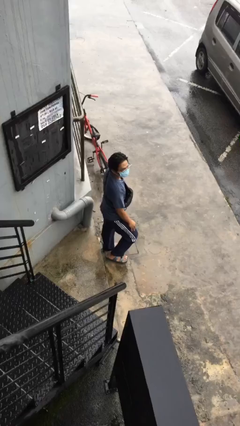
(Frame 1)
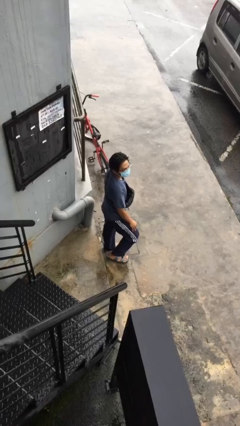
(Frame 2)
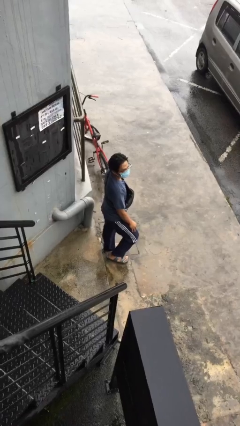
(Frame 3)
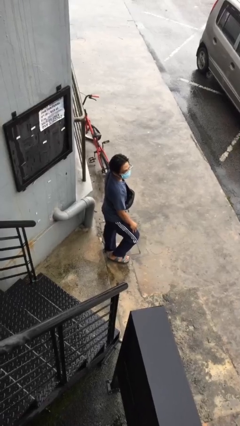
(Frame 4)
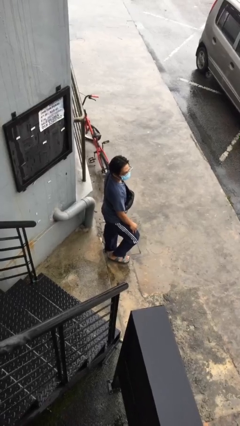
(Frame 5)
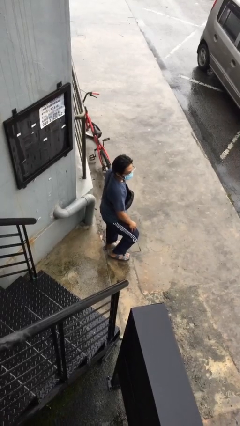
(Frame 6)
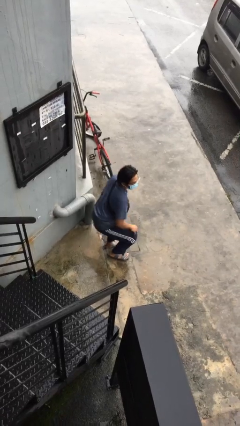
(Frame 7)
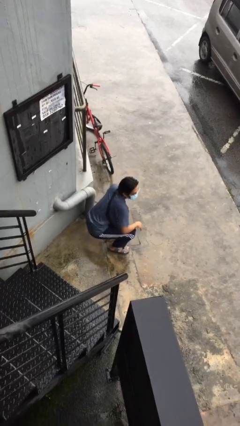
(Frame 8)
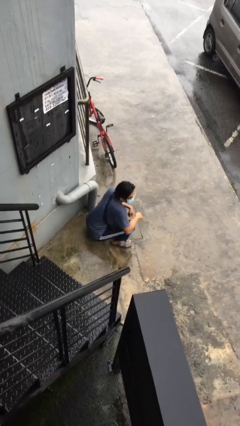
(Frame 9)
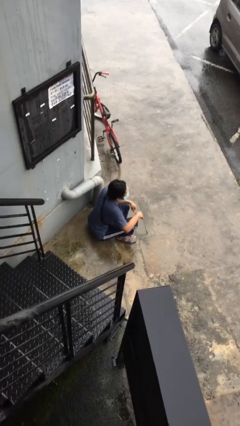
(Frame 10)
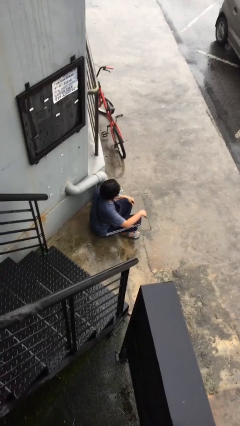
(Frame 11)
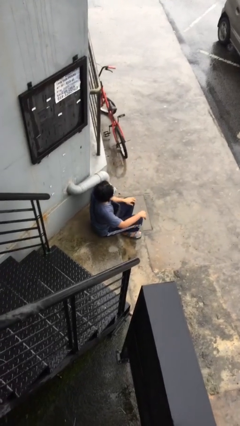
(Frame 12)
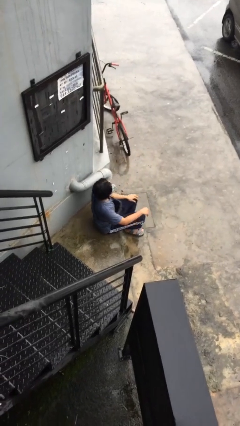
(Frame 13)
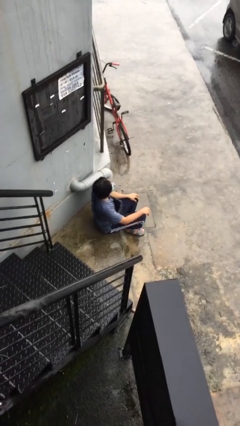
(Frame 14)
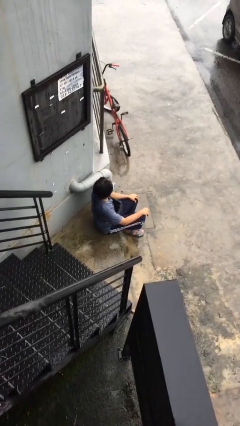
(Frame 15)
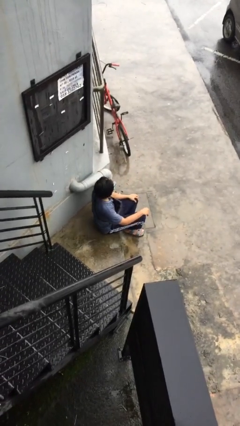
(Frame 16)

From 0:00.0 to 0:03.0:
person sits down

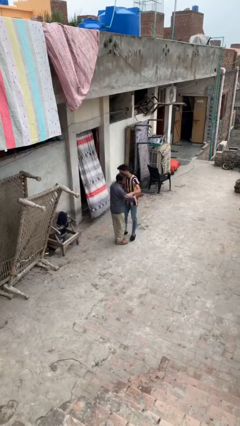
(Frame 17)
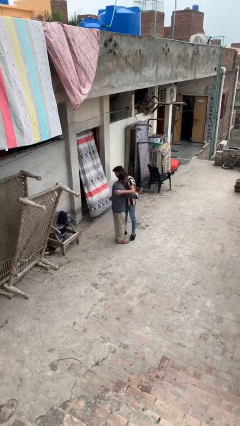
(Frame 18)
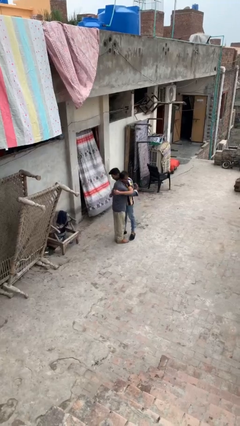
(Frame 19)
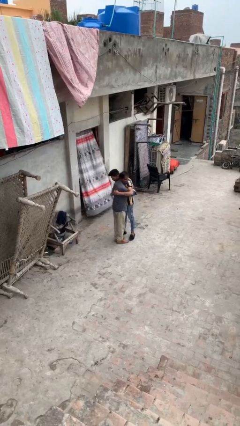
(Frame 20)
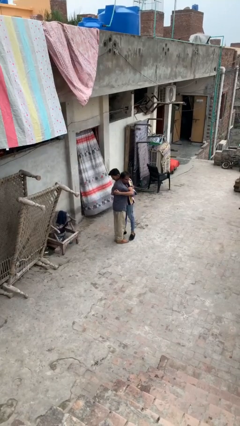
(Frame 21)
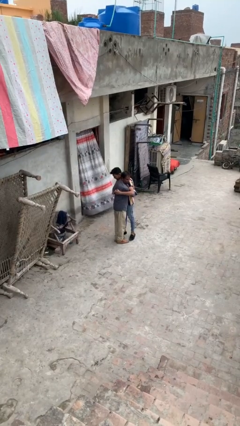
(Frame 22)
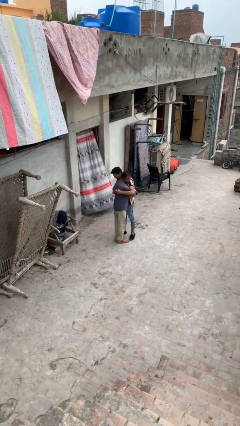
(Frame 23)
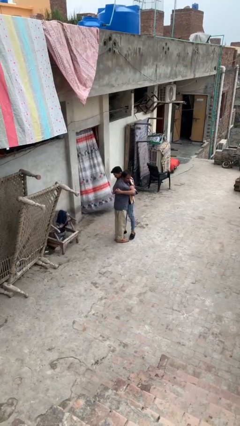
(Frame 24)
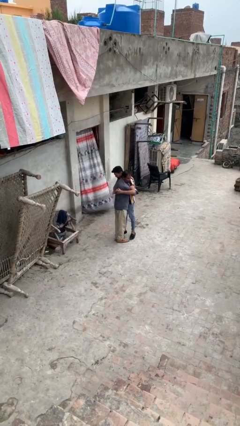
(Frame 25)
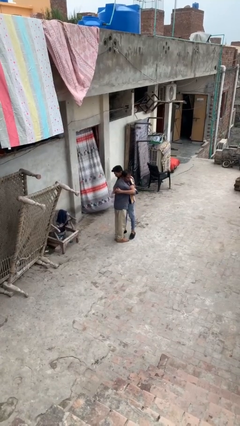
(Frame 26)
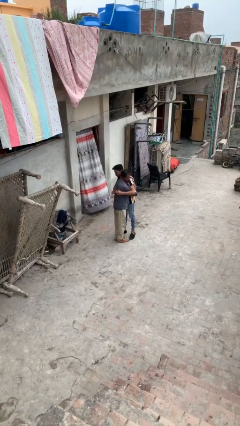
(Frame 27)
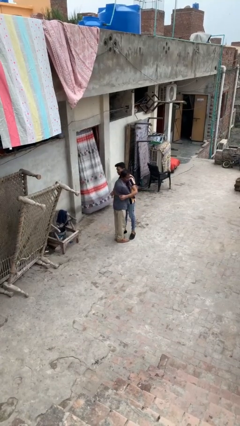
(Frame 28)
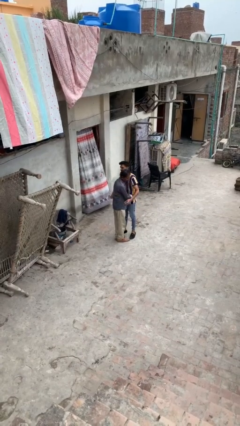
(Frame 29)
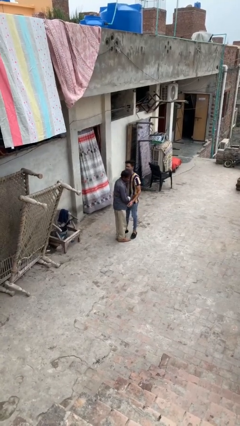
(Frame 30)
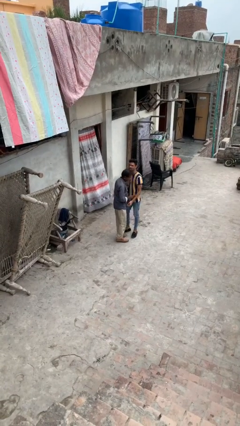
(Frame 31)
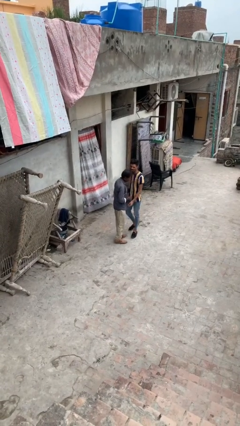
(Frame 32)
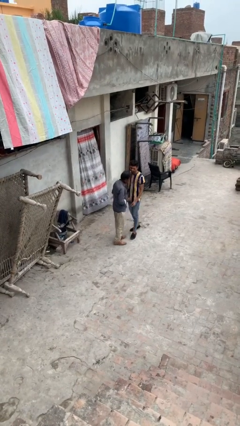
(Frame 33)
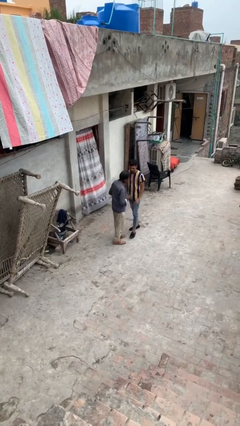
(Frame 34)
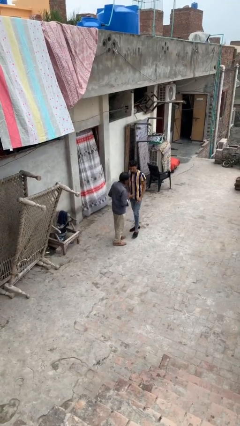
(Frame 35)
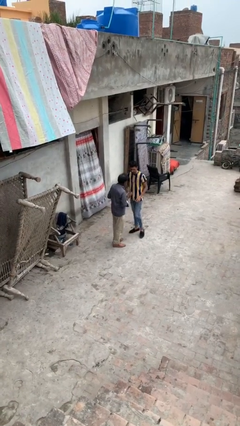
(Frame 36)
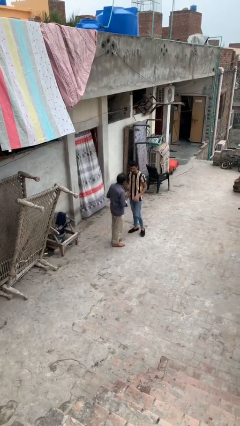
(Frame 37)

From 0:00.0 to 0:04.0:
person embraces person

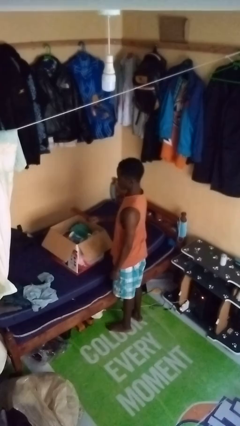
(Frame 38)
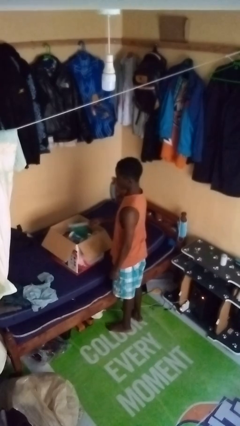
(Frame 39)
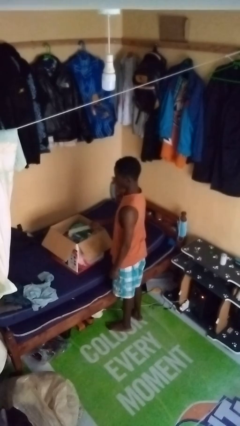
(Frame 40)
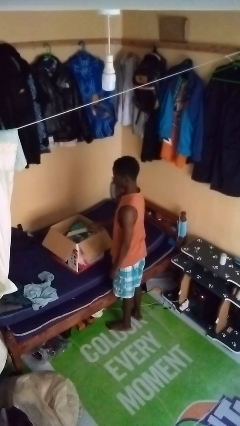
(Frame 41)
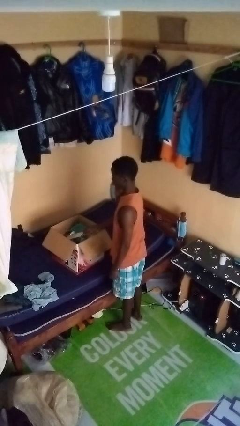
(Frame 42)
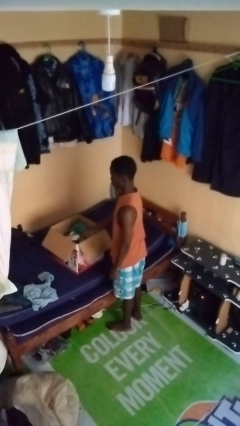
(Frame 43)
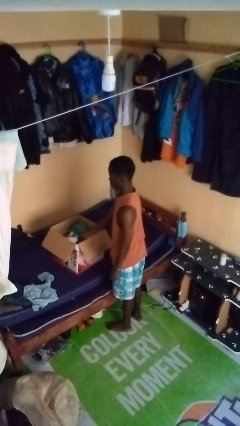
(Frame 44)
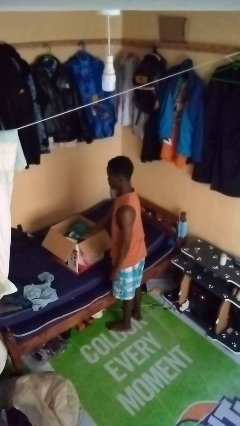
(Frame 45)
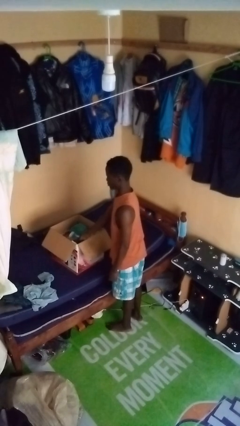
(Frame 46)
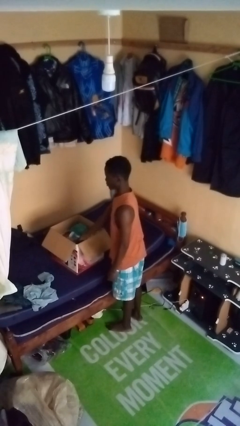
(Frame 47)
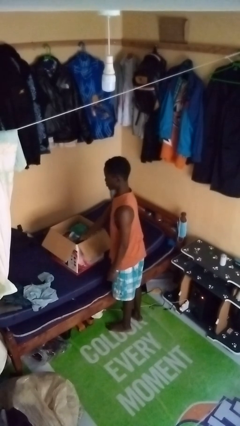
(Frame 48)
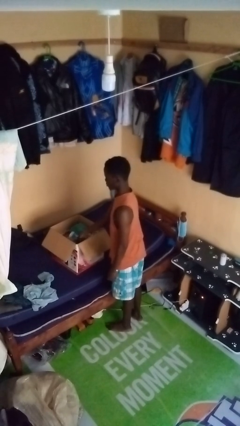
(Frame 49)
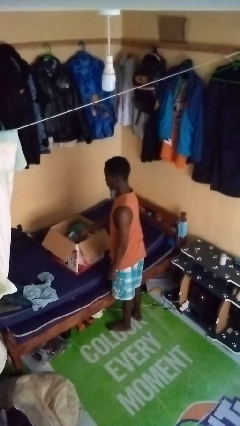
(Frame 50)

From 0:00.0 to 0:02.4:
person puts object into box

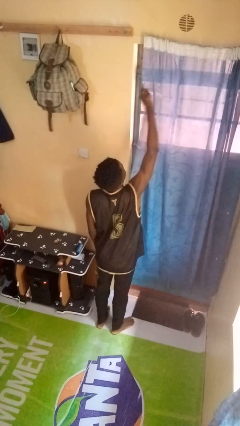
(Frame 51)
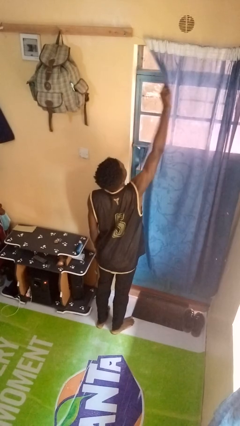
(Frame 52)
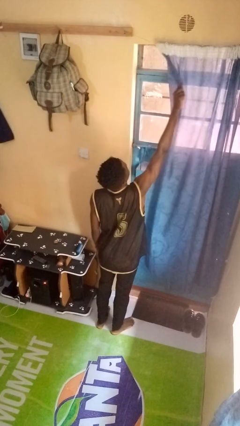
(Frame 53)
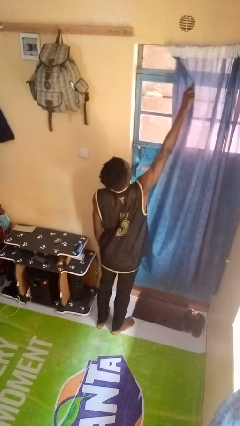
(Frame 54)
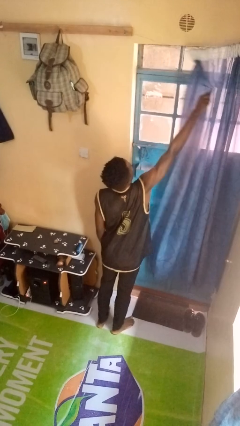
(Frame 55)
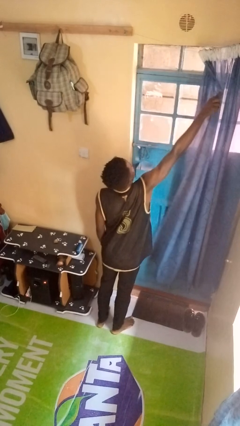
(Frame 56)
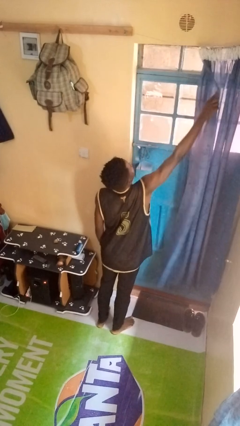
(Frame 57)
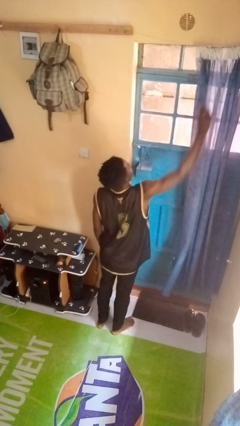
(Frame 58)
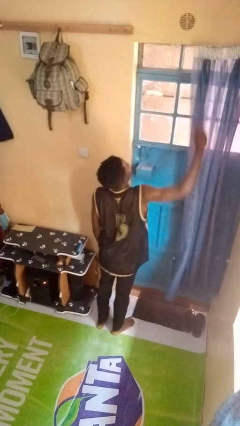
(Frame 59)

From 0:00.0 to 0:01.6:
person opens curtains

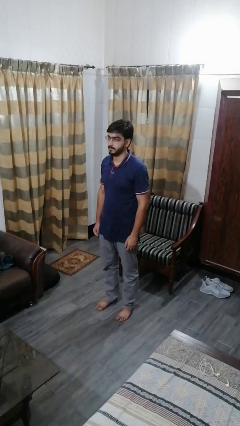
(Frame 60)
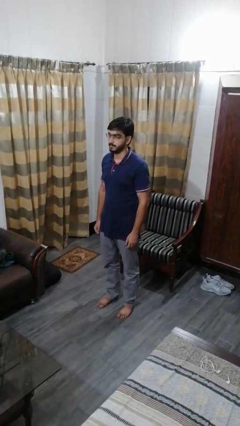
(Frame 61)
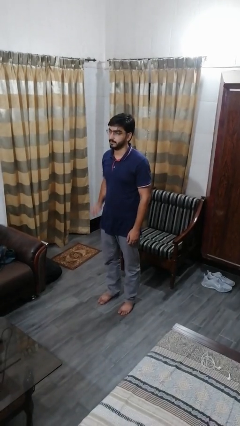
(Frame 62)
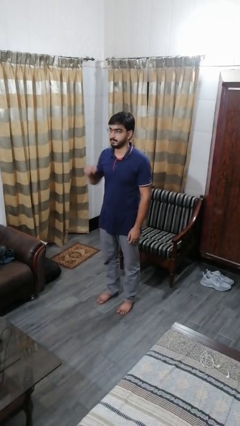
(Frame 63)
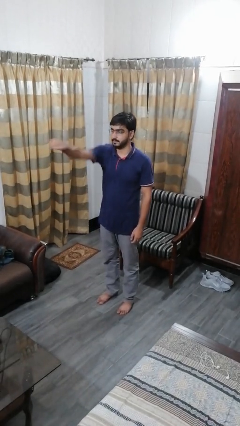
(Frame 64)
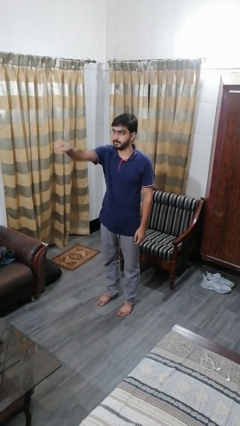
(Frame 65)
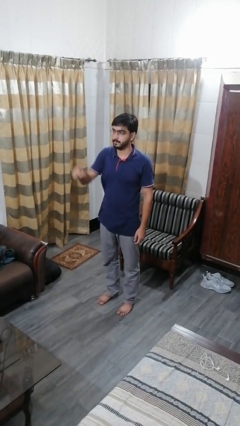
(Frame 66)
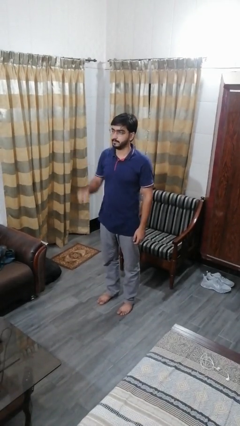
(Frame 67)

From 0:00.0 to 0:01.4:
person punches

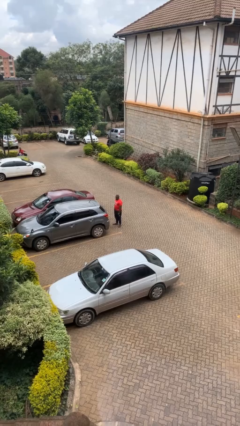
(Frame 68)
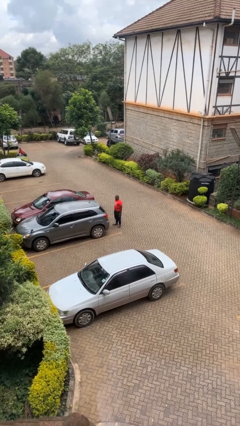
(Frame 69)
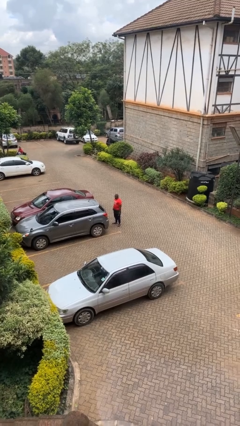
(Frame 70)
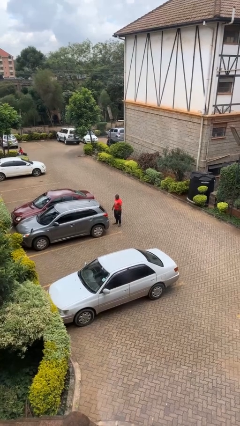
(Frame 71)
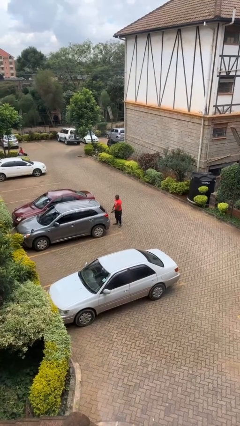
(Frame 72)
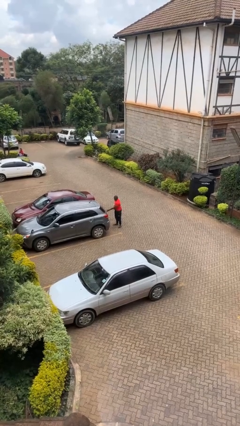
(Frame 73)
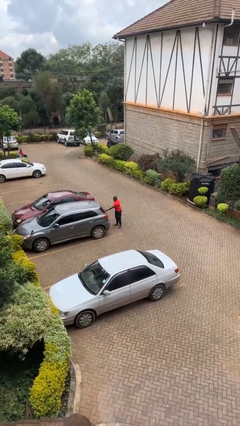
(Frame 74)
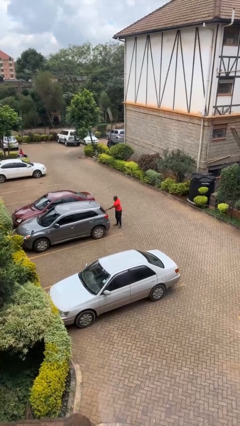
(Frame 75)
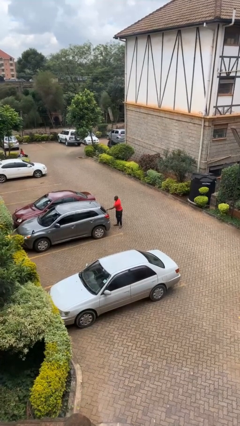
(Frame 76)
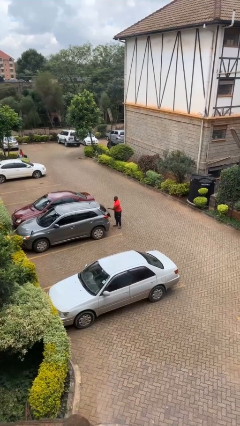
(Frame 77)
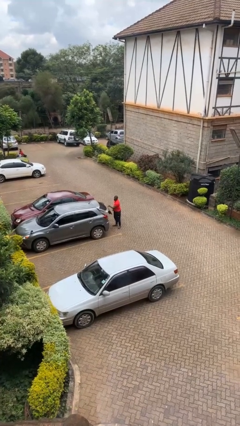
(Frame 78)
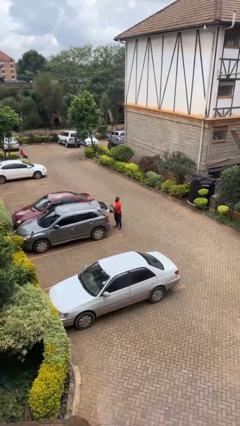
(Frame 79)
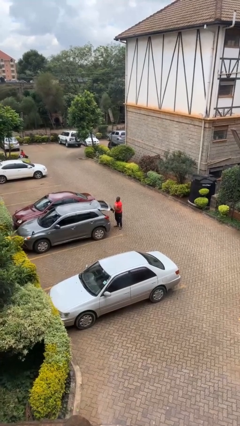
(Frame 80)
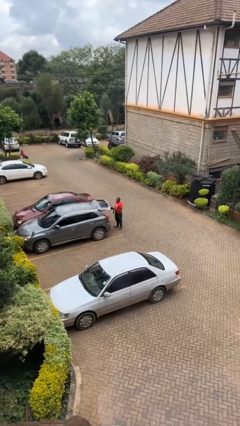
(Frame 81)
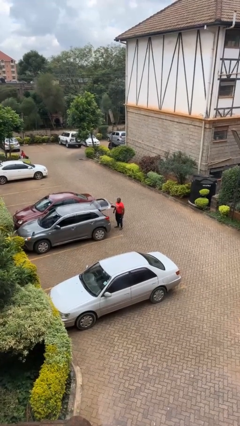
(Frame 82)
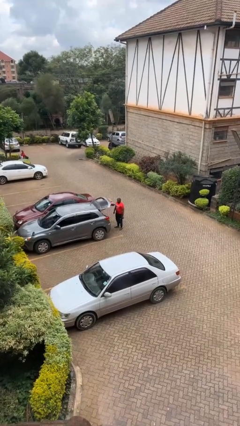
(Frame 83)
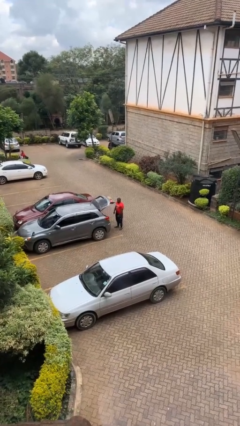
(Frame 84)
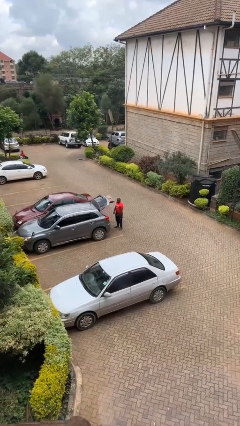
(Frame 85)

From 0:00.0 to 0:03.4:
person opens car trunk

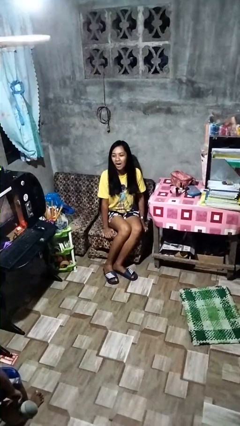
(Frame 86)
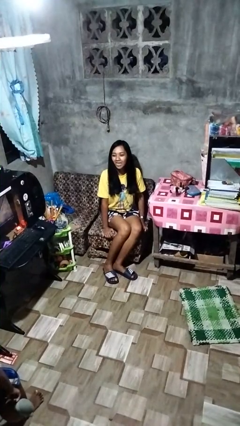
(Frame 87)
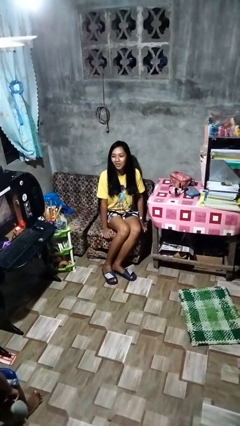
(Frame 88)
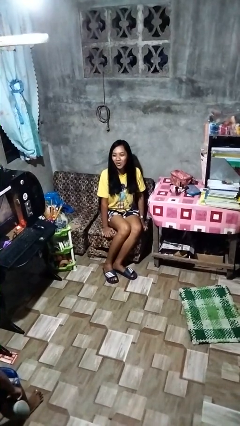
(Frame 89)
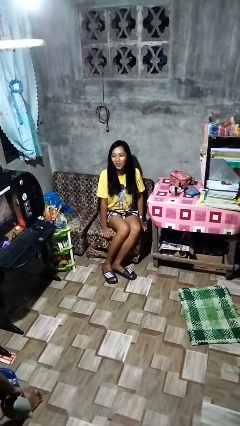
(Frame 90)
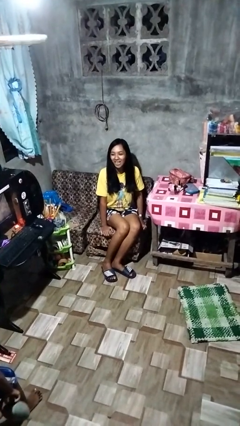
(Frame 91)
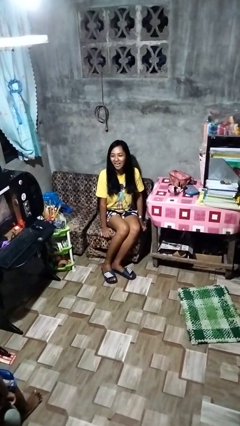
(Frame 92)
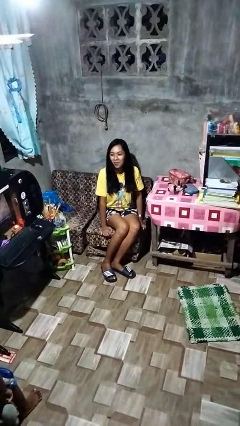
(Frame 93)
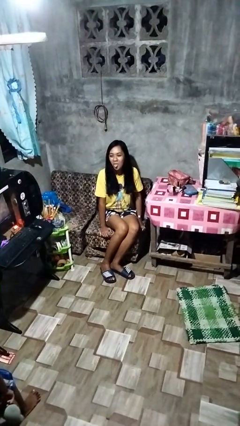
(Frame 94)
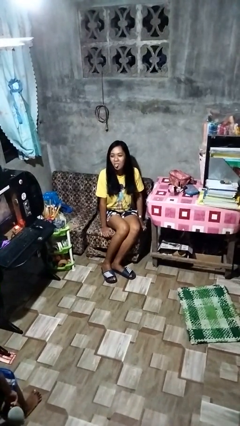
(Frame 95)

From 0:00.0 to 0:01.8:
person sticks out tongue
